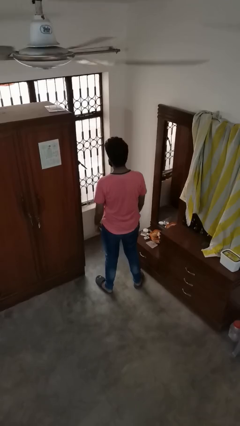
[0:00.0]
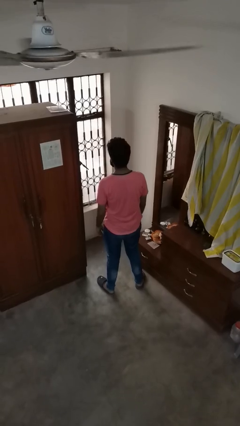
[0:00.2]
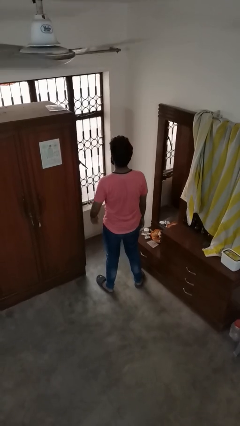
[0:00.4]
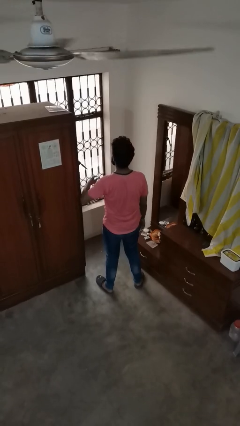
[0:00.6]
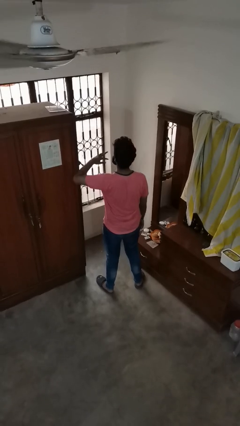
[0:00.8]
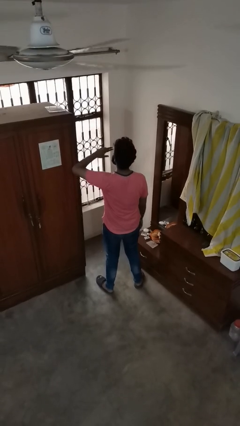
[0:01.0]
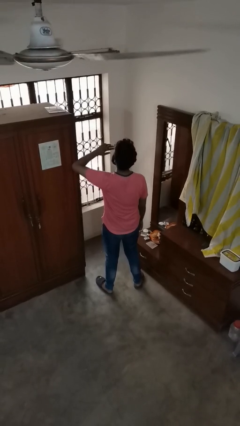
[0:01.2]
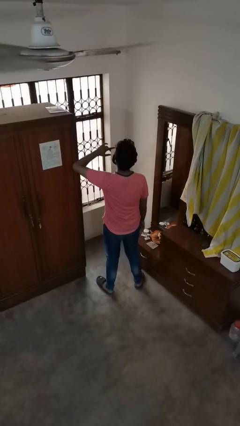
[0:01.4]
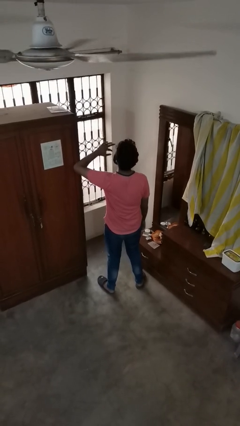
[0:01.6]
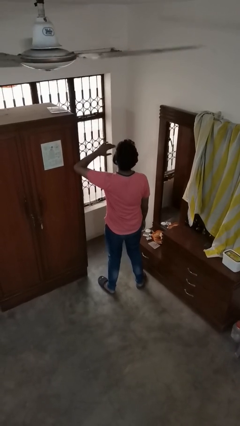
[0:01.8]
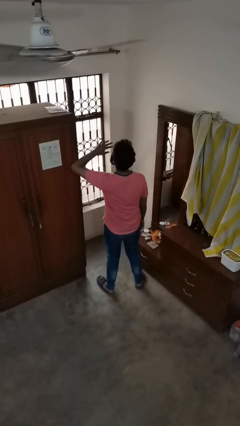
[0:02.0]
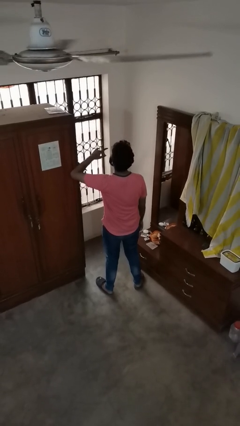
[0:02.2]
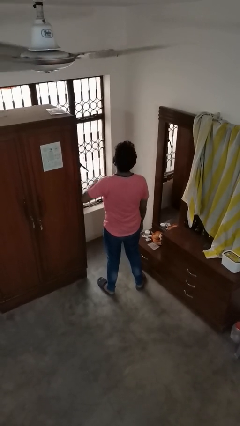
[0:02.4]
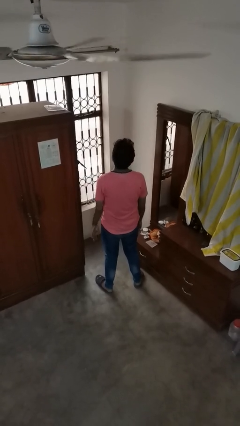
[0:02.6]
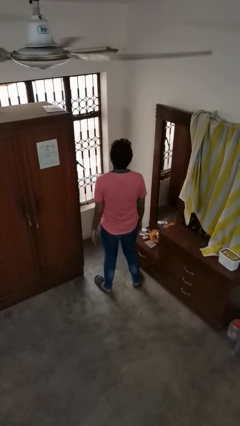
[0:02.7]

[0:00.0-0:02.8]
person yawns

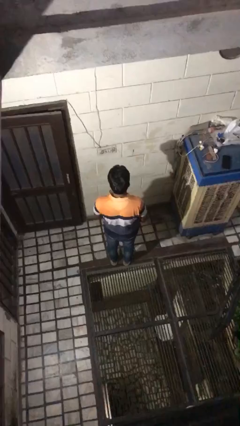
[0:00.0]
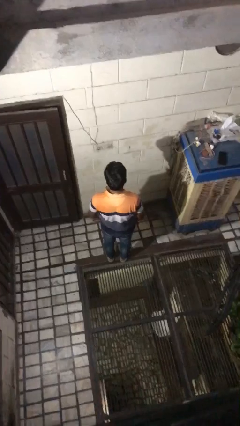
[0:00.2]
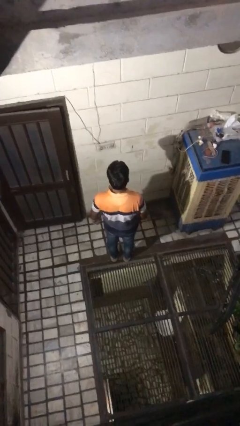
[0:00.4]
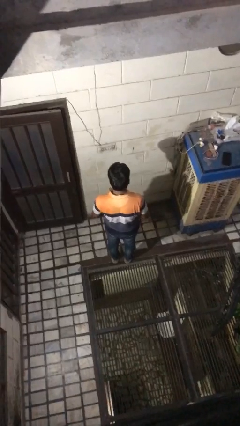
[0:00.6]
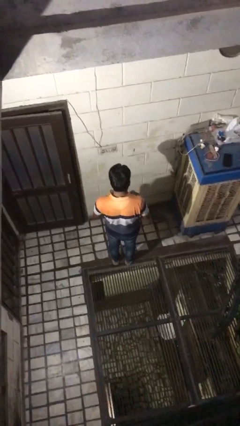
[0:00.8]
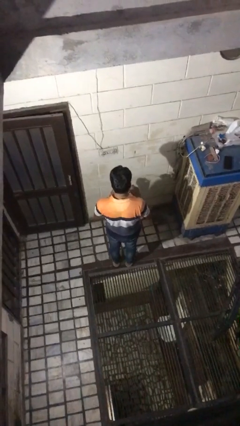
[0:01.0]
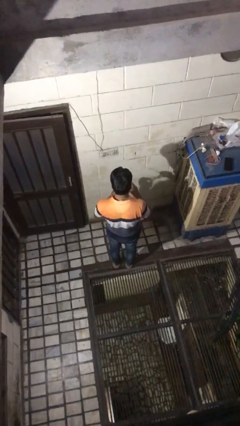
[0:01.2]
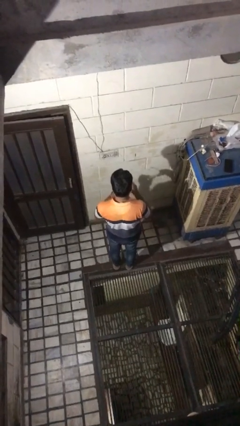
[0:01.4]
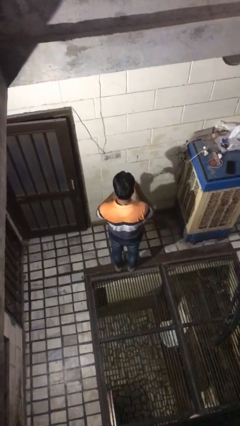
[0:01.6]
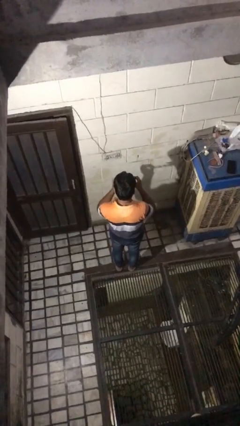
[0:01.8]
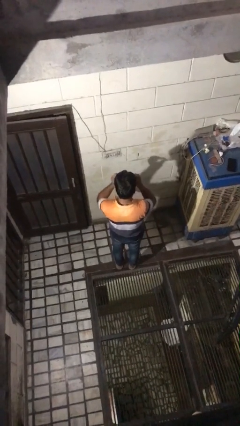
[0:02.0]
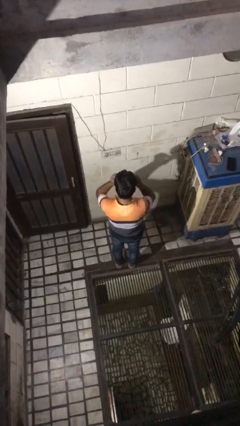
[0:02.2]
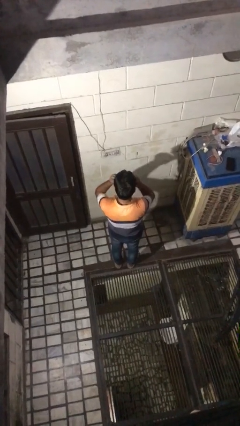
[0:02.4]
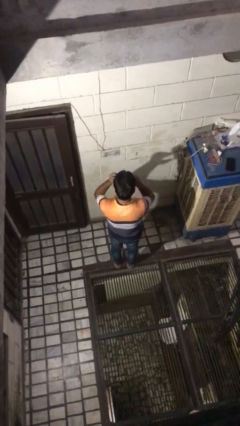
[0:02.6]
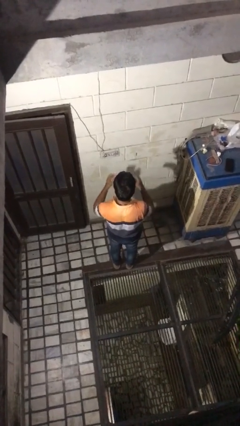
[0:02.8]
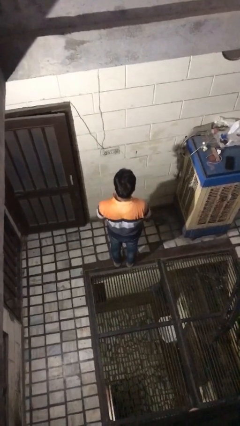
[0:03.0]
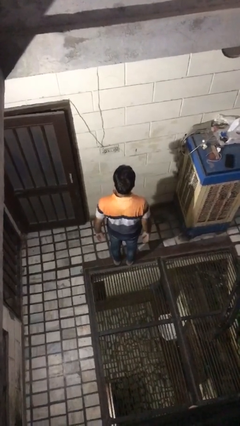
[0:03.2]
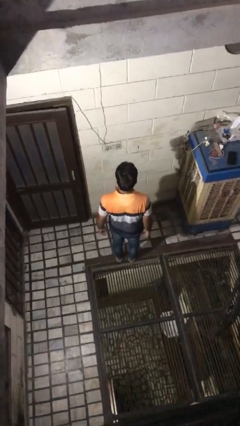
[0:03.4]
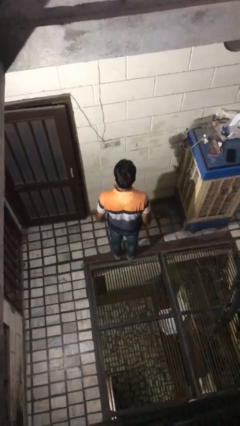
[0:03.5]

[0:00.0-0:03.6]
person puts on glasses

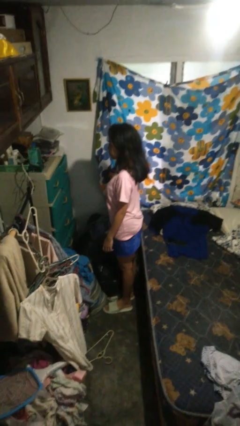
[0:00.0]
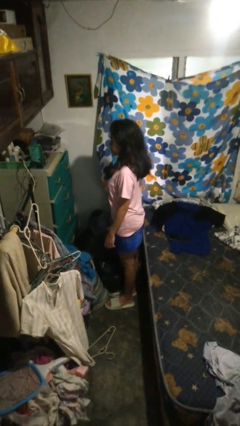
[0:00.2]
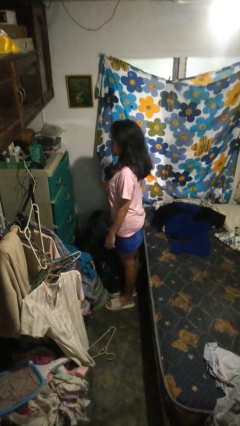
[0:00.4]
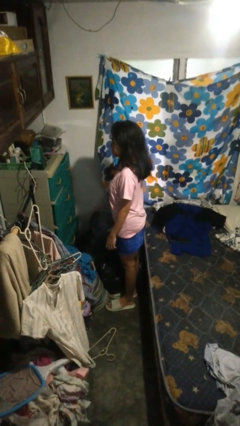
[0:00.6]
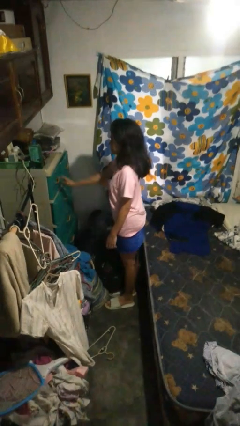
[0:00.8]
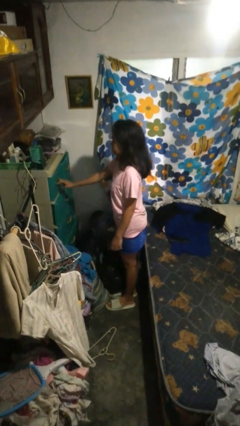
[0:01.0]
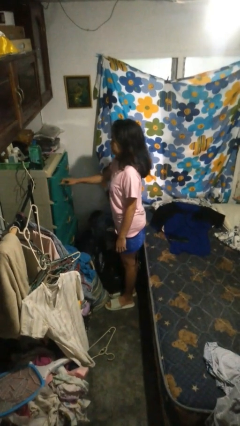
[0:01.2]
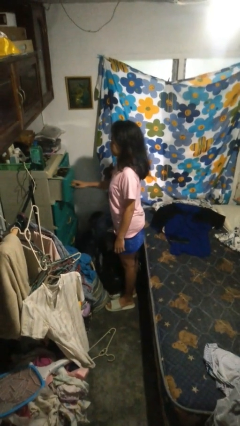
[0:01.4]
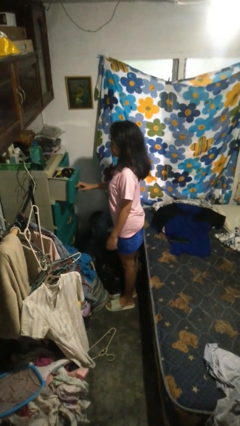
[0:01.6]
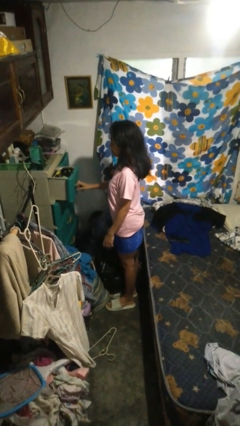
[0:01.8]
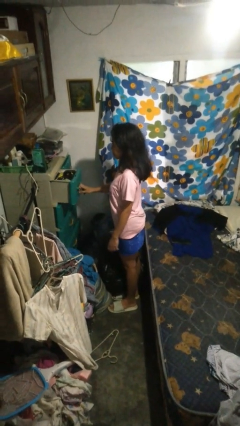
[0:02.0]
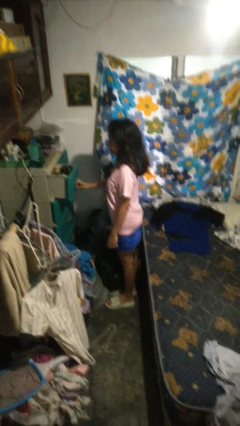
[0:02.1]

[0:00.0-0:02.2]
person opens dresser drawer

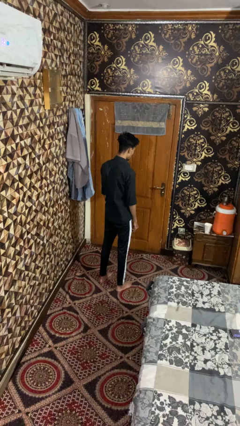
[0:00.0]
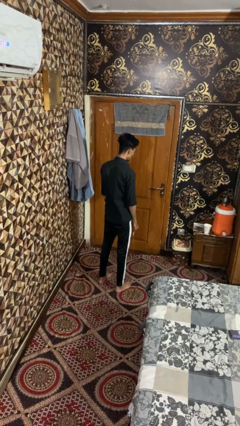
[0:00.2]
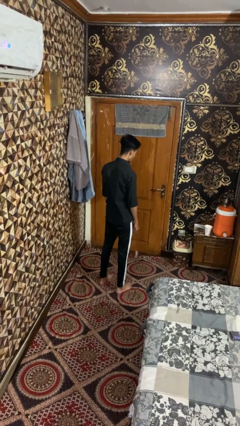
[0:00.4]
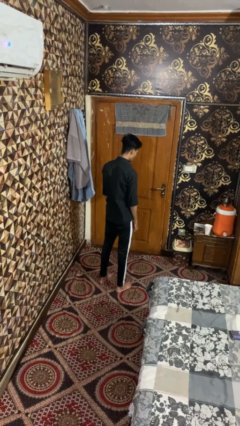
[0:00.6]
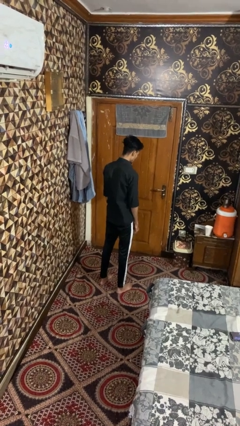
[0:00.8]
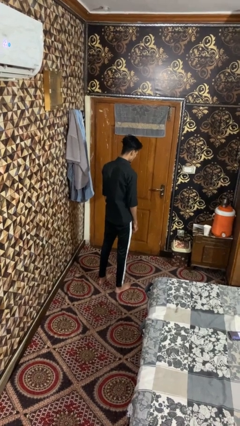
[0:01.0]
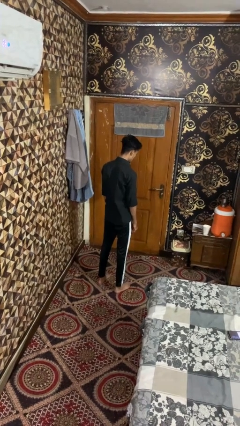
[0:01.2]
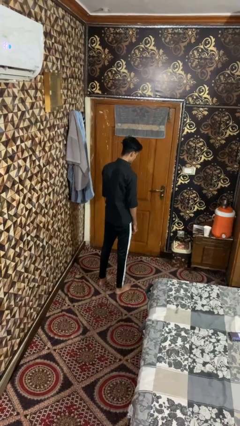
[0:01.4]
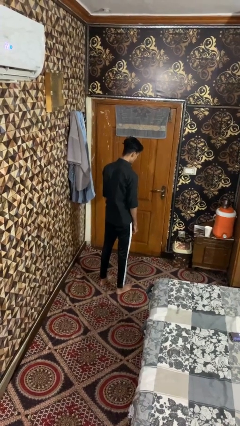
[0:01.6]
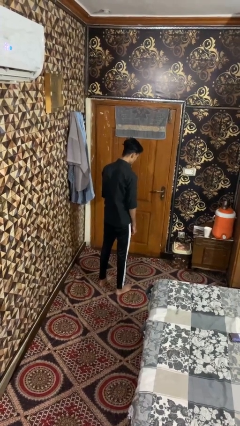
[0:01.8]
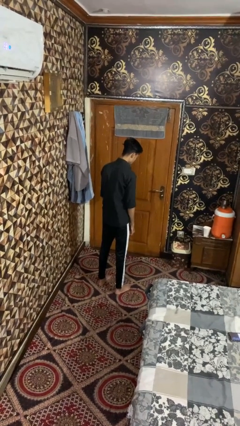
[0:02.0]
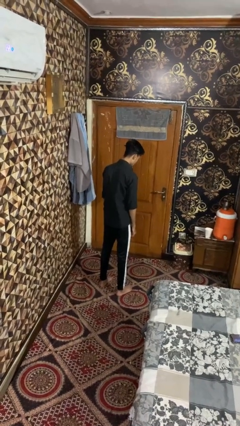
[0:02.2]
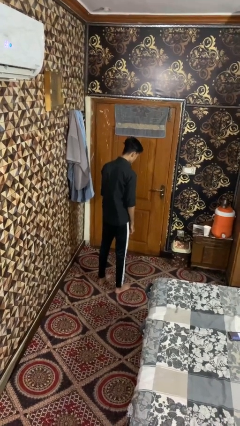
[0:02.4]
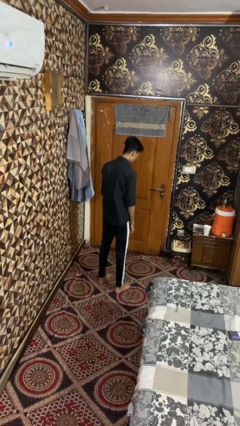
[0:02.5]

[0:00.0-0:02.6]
person drops object

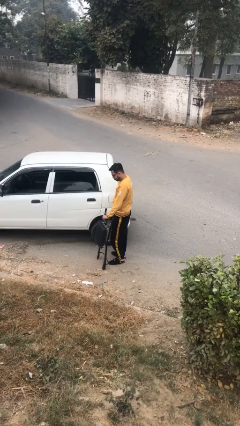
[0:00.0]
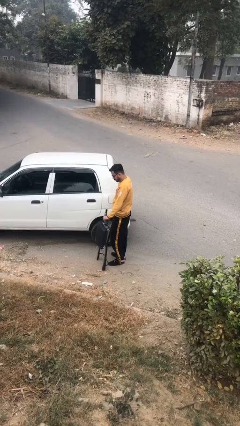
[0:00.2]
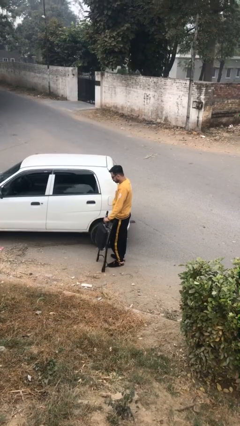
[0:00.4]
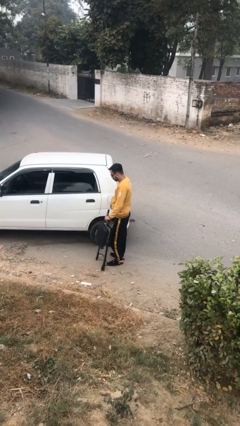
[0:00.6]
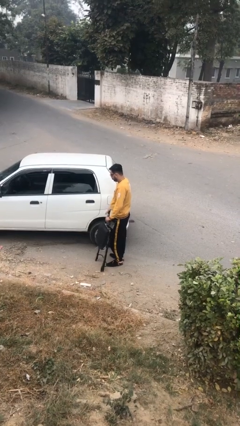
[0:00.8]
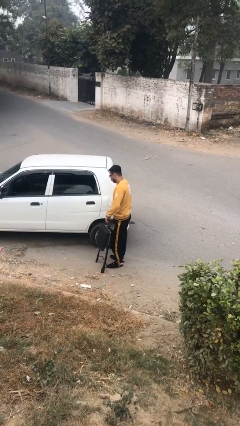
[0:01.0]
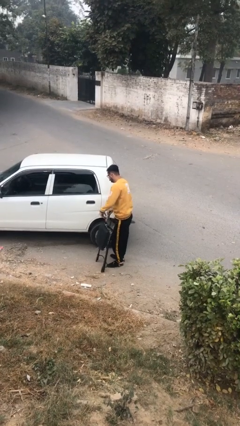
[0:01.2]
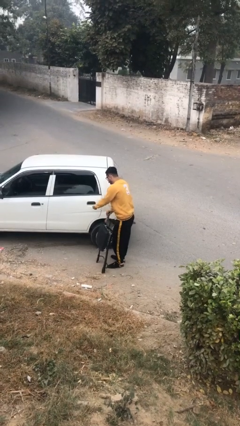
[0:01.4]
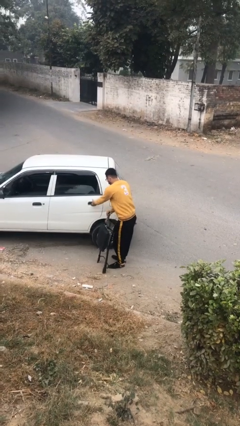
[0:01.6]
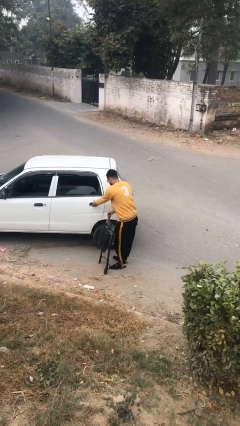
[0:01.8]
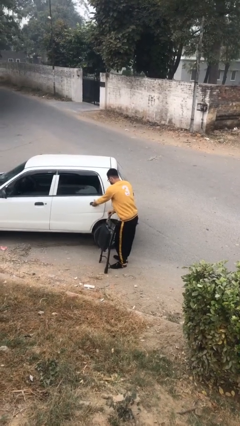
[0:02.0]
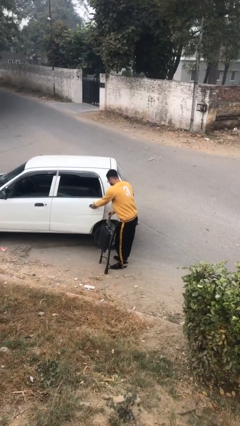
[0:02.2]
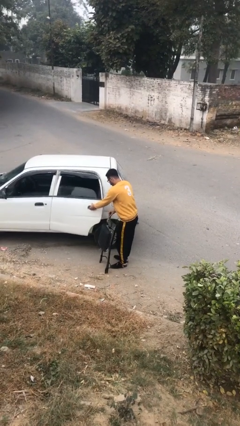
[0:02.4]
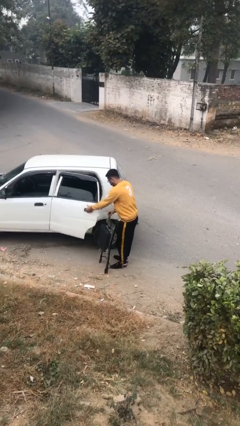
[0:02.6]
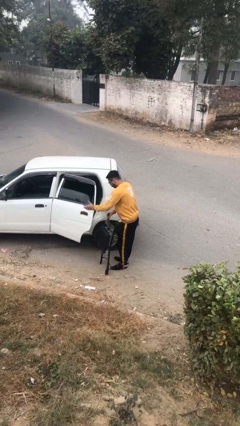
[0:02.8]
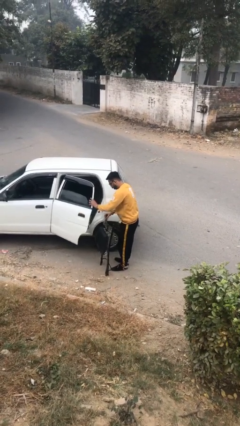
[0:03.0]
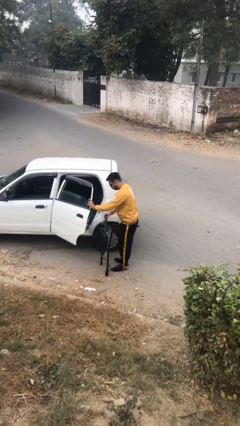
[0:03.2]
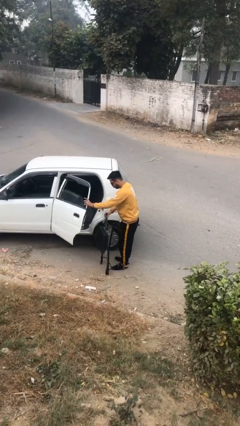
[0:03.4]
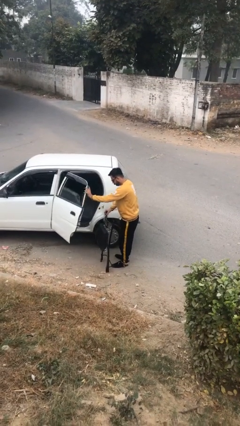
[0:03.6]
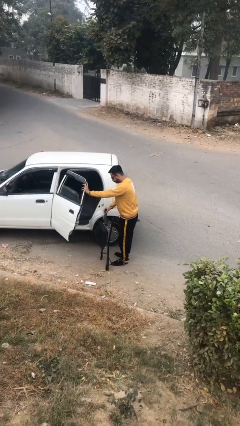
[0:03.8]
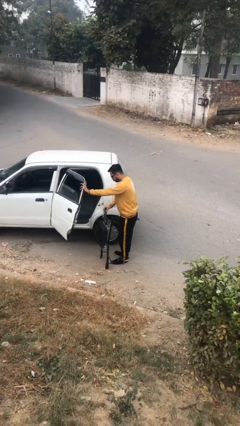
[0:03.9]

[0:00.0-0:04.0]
person opens car door

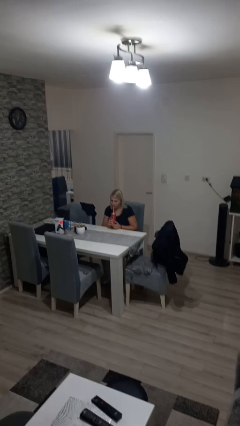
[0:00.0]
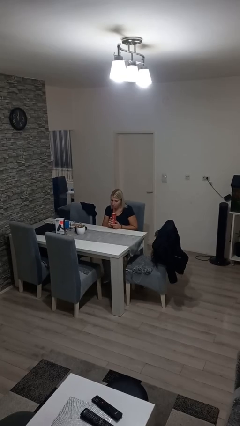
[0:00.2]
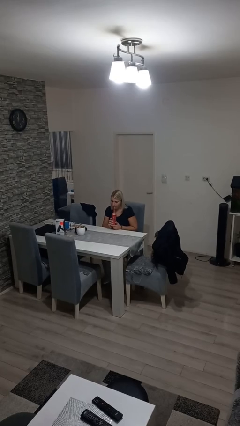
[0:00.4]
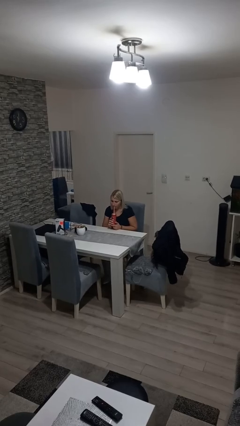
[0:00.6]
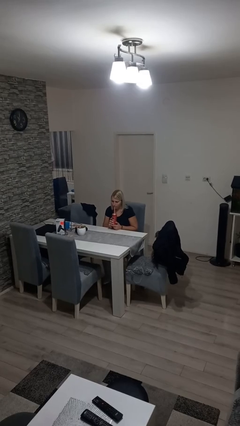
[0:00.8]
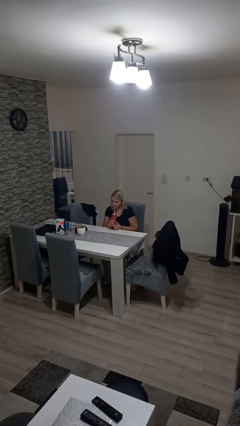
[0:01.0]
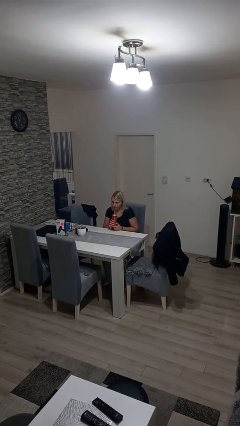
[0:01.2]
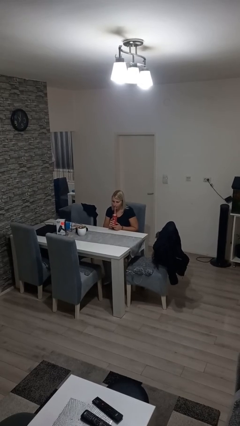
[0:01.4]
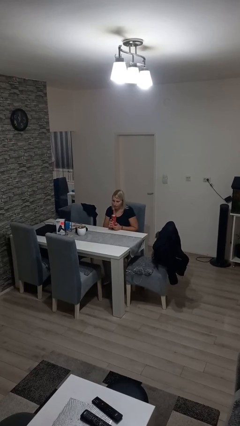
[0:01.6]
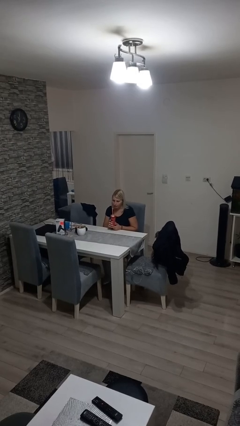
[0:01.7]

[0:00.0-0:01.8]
person drinks from straw

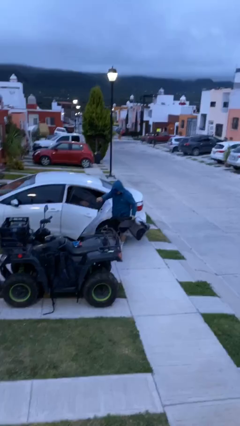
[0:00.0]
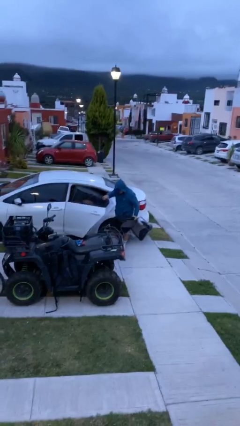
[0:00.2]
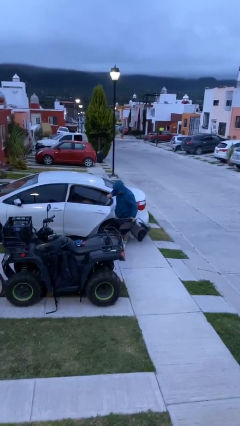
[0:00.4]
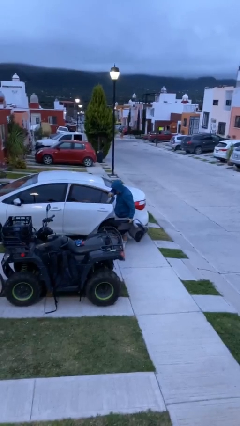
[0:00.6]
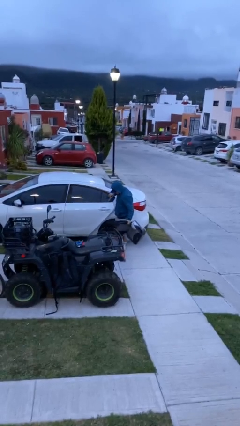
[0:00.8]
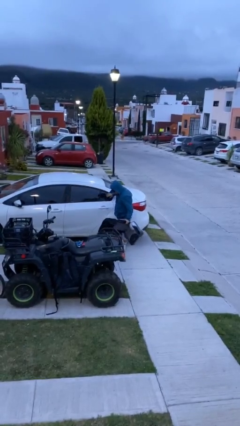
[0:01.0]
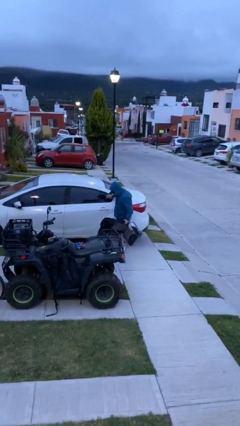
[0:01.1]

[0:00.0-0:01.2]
person closes car door
